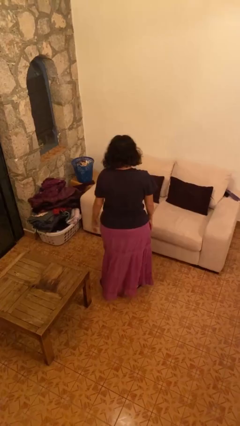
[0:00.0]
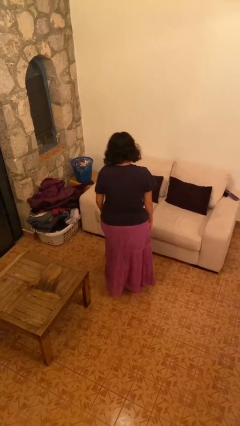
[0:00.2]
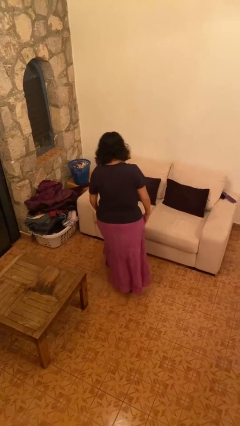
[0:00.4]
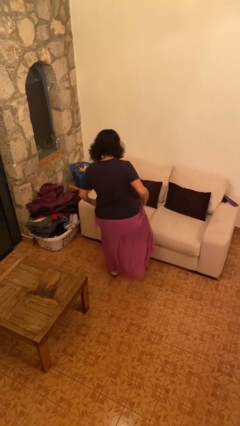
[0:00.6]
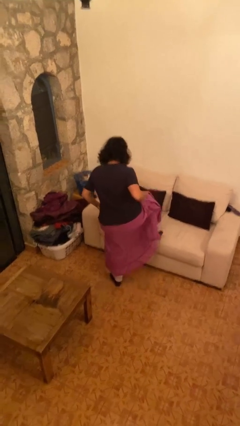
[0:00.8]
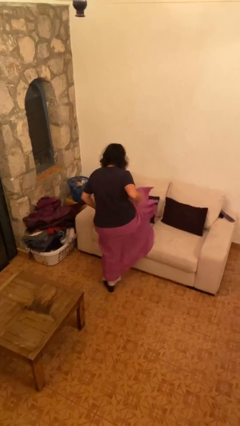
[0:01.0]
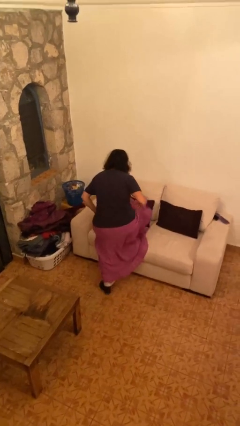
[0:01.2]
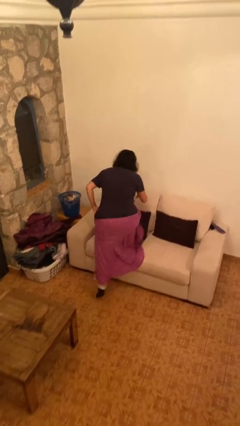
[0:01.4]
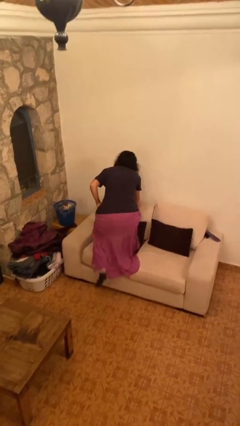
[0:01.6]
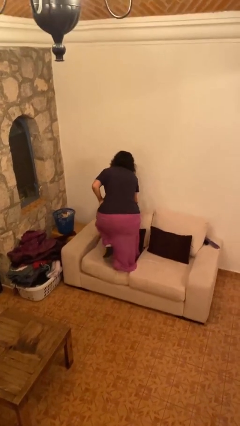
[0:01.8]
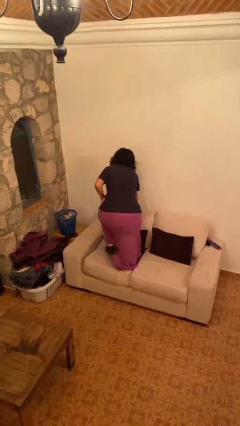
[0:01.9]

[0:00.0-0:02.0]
person climbs on couch

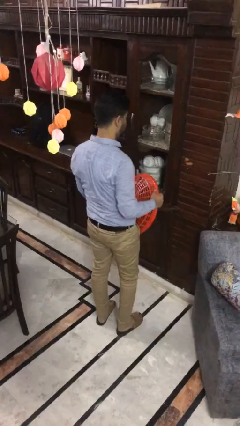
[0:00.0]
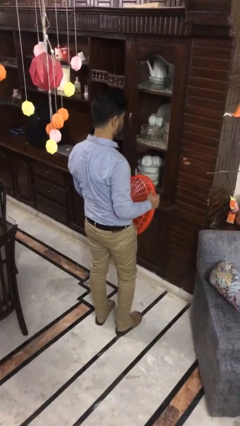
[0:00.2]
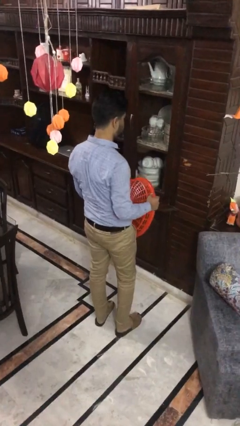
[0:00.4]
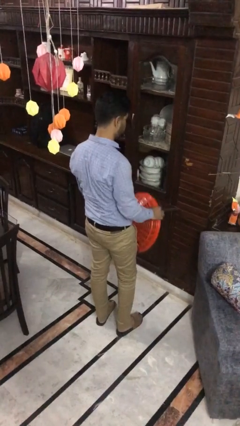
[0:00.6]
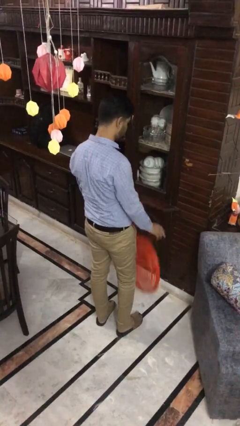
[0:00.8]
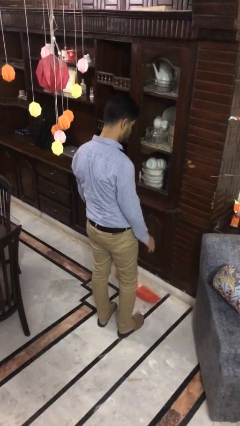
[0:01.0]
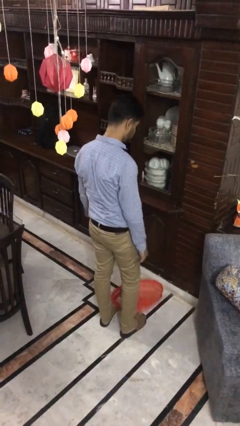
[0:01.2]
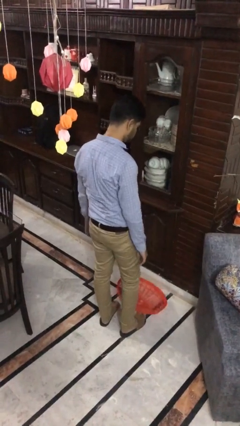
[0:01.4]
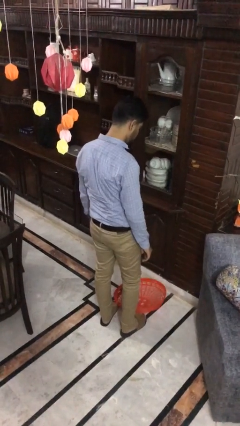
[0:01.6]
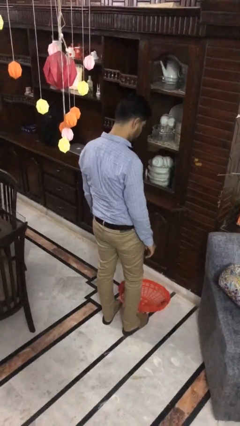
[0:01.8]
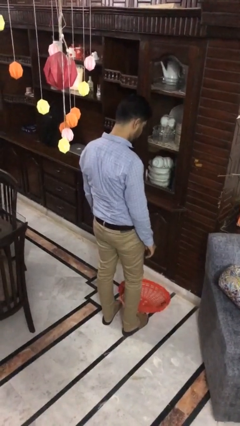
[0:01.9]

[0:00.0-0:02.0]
person drops object

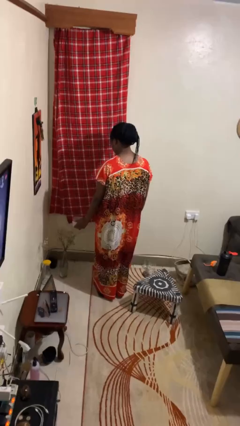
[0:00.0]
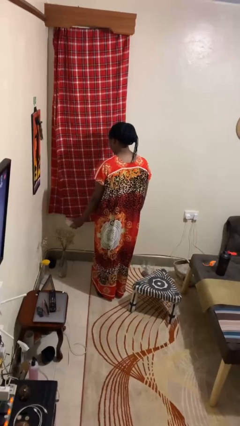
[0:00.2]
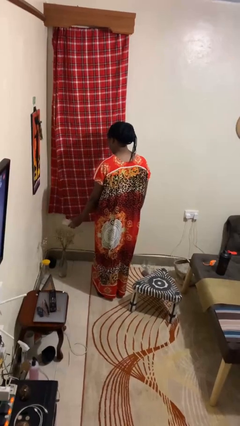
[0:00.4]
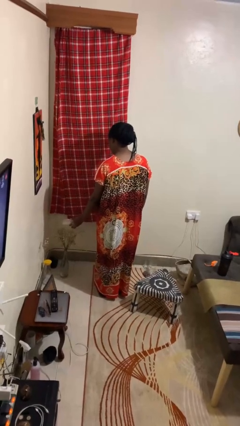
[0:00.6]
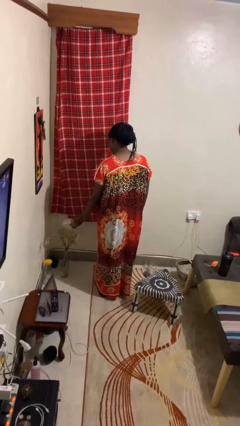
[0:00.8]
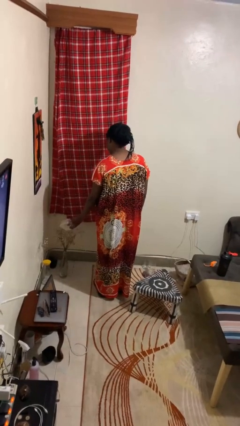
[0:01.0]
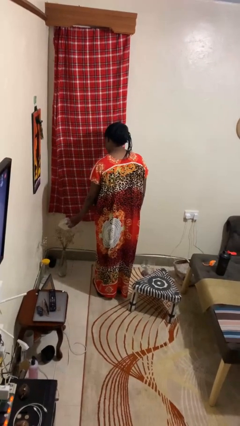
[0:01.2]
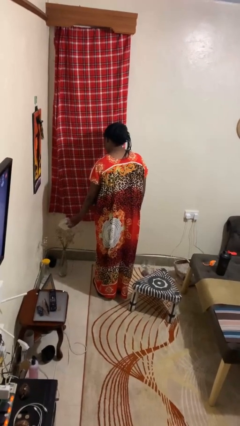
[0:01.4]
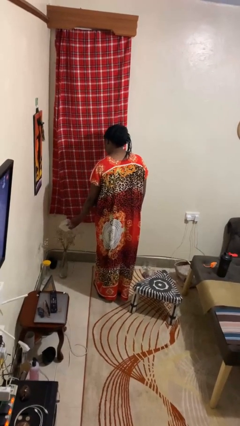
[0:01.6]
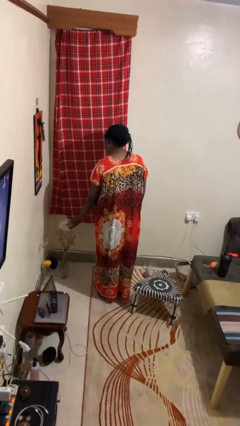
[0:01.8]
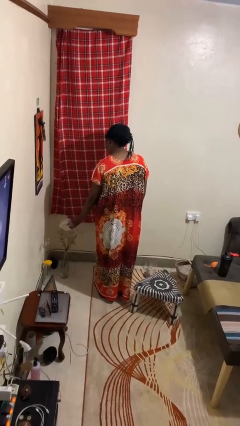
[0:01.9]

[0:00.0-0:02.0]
person waters houseplant

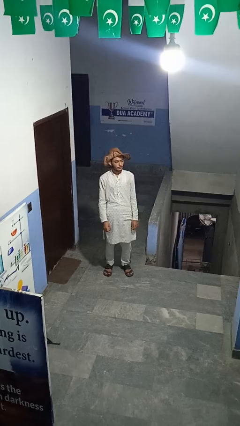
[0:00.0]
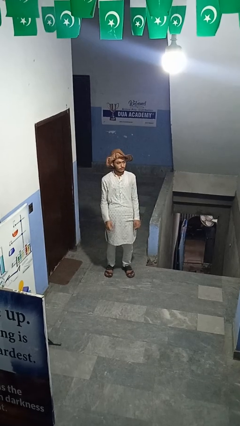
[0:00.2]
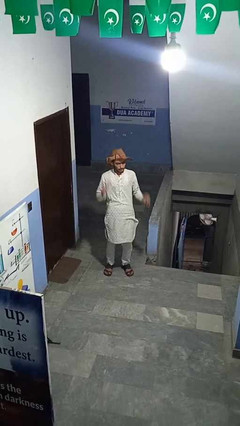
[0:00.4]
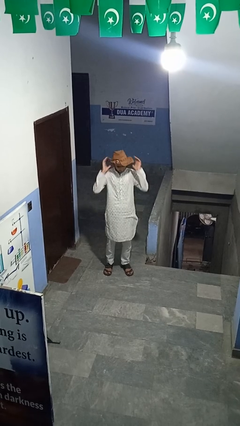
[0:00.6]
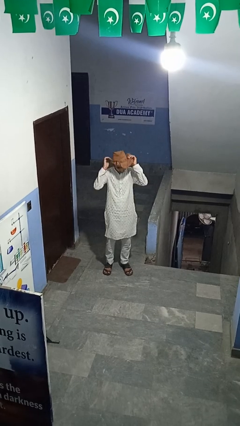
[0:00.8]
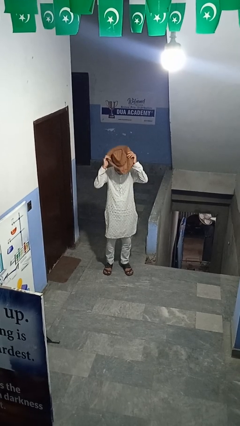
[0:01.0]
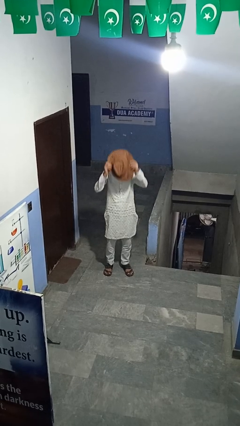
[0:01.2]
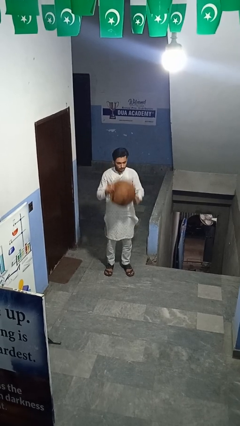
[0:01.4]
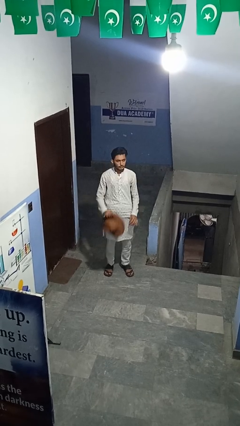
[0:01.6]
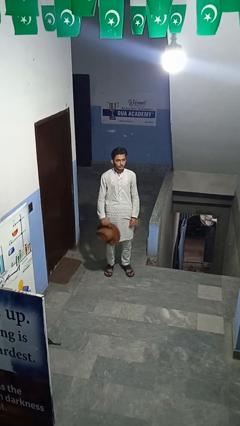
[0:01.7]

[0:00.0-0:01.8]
person takes off hat

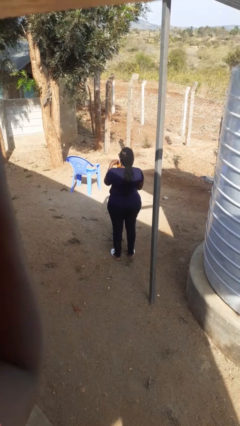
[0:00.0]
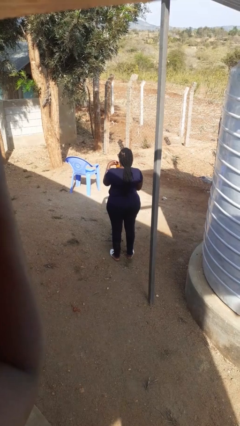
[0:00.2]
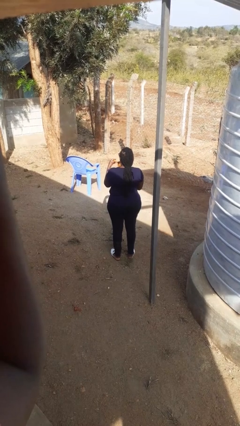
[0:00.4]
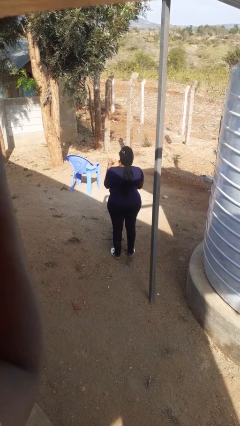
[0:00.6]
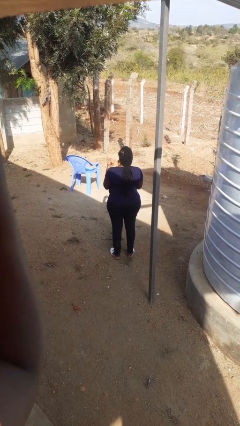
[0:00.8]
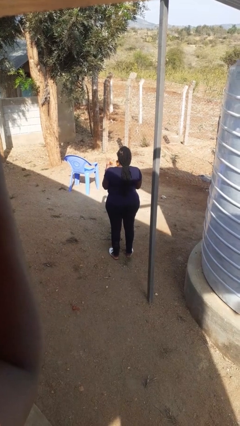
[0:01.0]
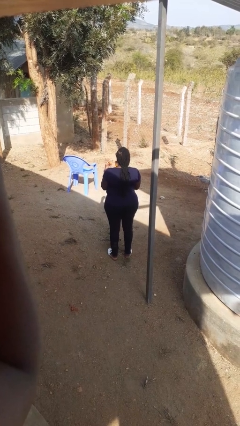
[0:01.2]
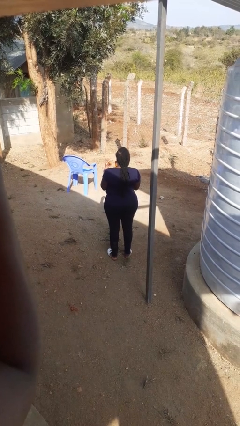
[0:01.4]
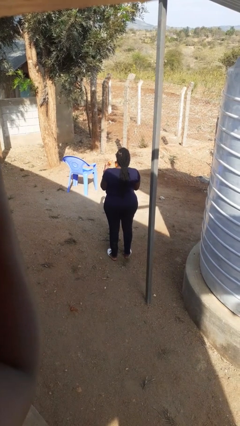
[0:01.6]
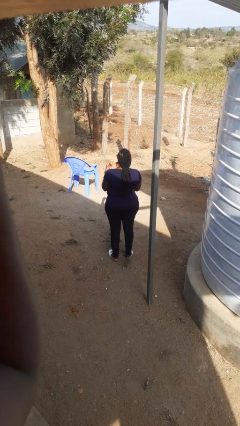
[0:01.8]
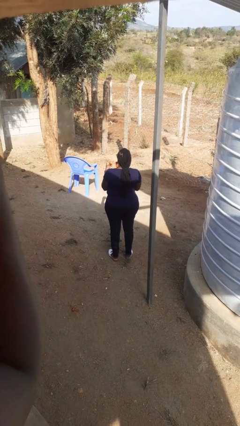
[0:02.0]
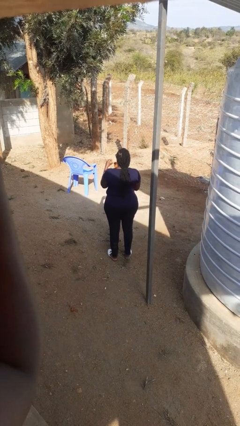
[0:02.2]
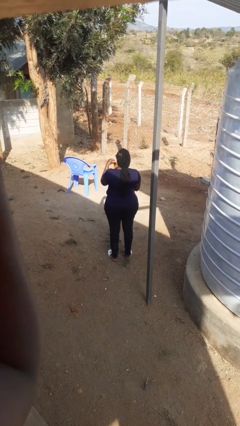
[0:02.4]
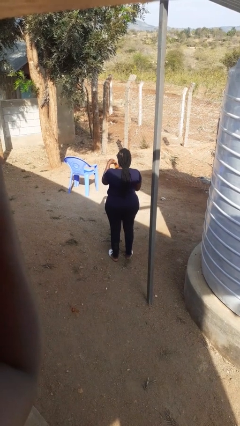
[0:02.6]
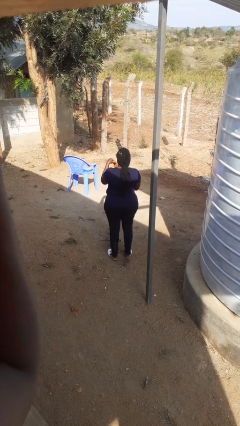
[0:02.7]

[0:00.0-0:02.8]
person opens jar

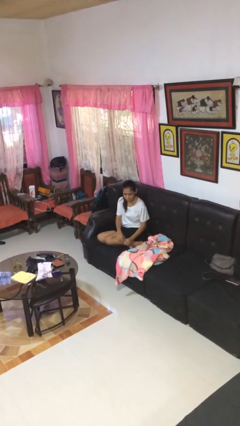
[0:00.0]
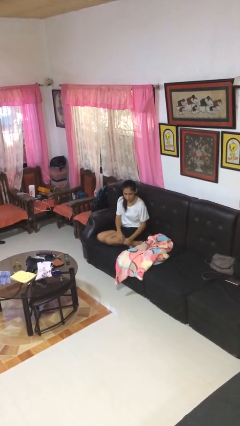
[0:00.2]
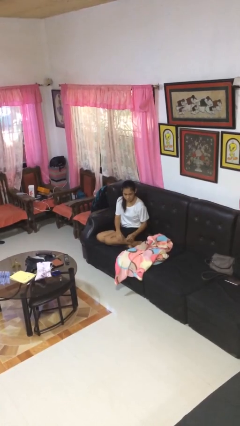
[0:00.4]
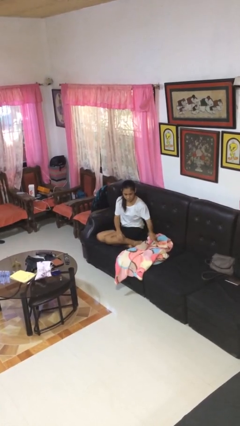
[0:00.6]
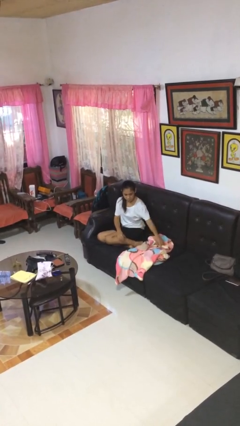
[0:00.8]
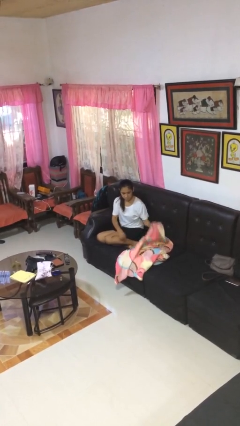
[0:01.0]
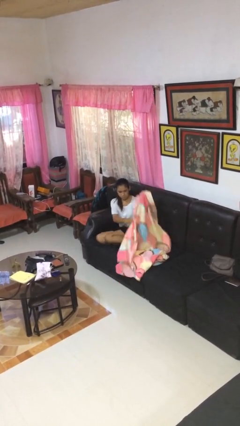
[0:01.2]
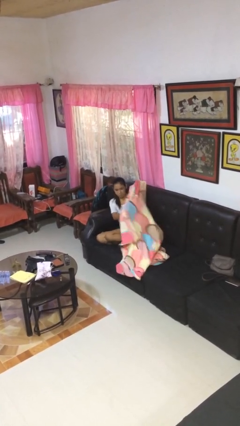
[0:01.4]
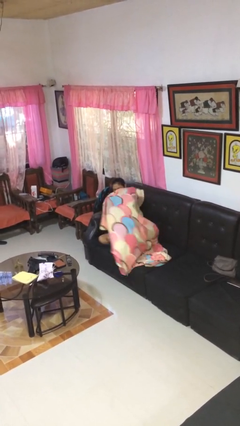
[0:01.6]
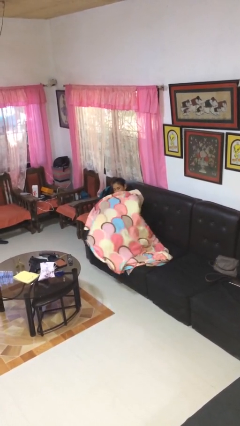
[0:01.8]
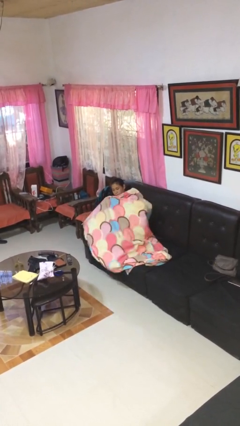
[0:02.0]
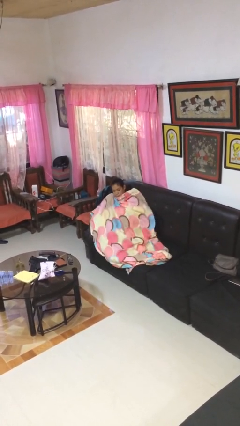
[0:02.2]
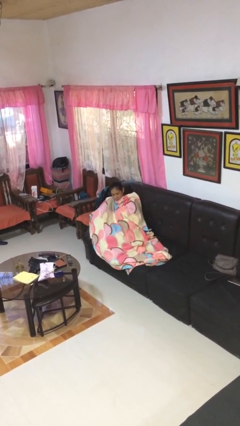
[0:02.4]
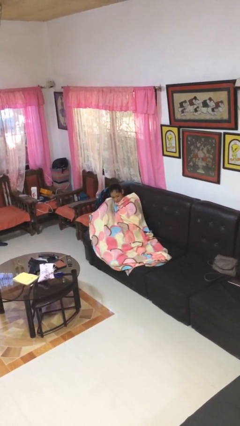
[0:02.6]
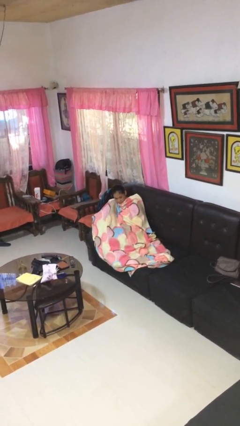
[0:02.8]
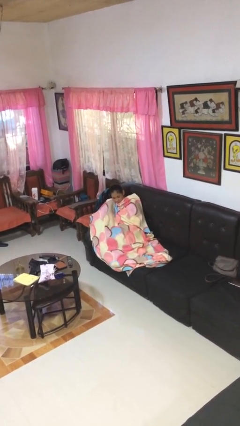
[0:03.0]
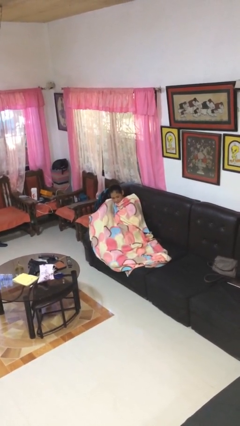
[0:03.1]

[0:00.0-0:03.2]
person covers with blanket

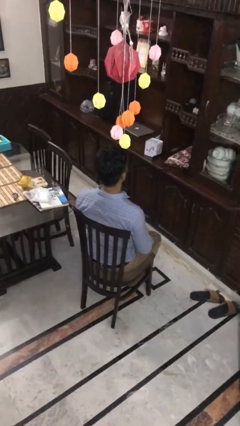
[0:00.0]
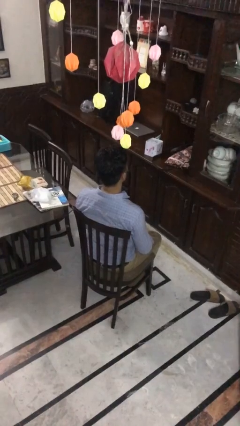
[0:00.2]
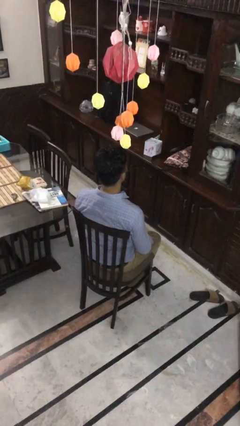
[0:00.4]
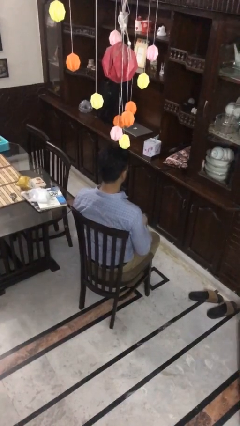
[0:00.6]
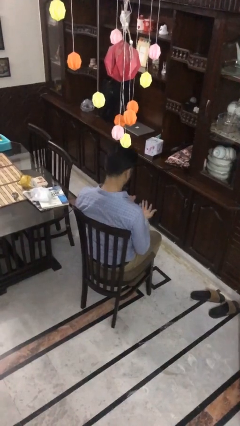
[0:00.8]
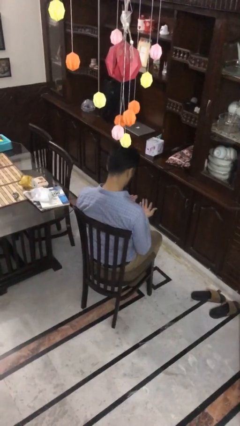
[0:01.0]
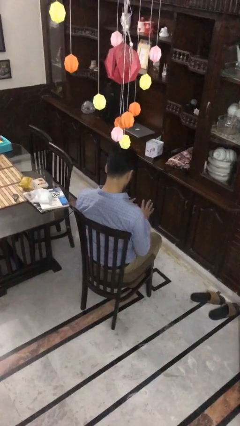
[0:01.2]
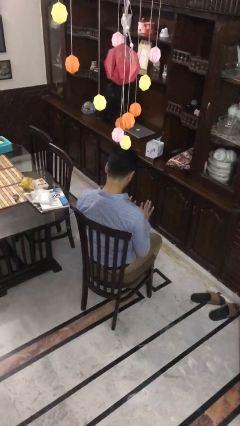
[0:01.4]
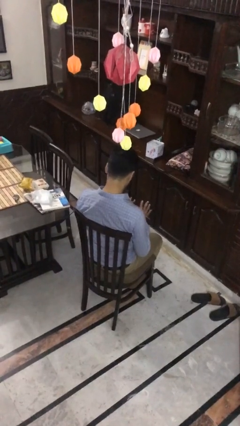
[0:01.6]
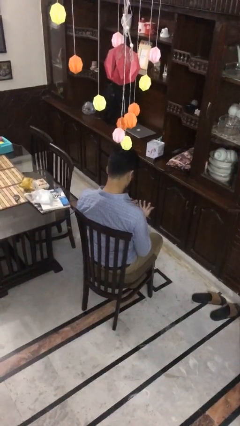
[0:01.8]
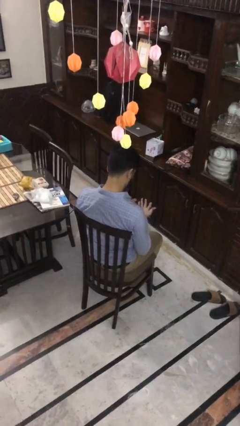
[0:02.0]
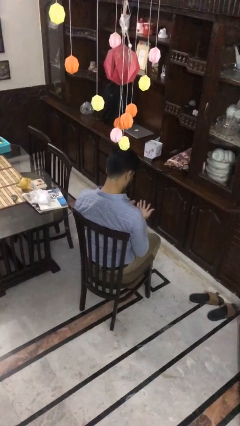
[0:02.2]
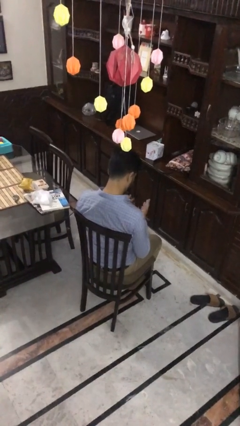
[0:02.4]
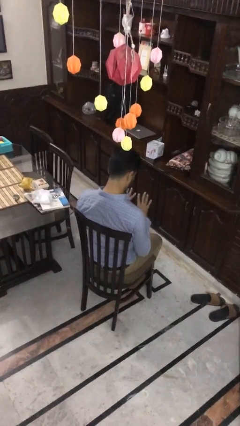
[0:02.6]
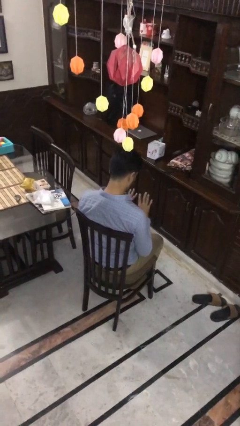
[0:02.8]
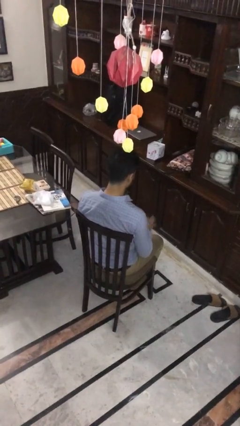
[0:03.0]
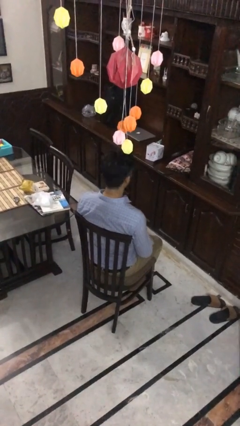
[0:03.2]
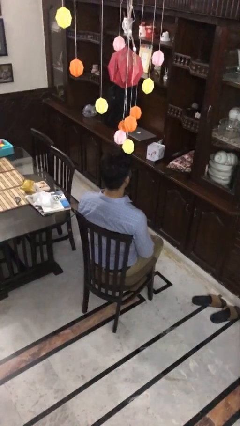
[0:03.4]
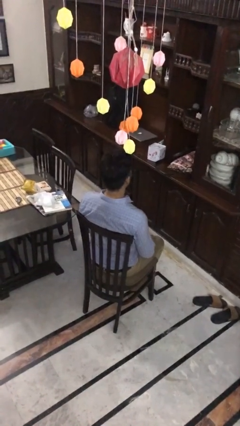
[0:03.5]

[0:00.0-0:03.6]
person looks at hands in lap
